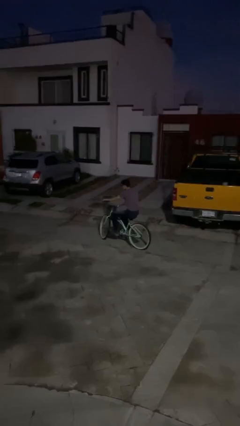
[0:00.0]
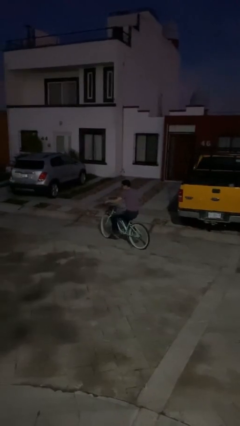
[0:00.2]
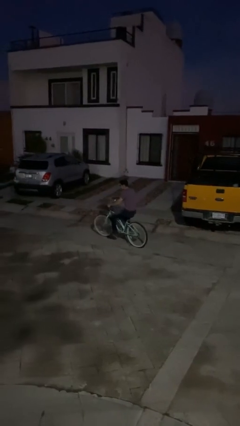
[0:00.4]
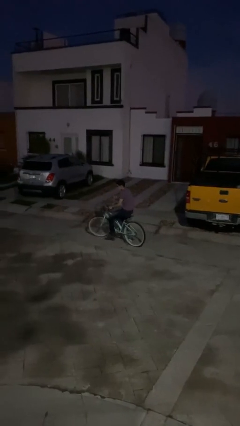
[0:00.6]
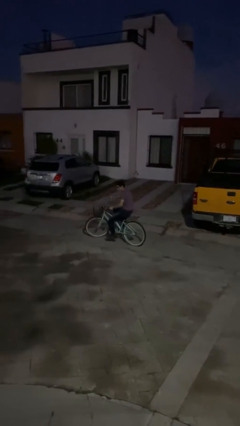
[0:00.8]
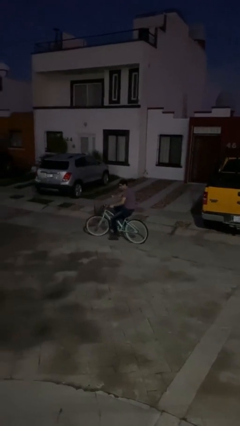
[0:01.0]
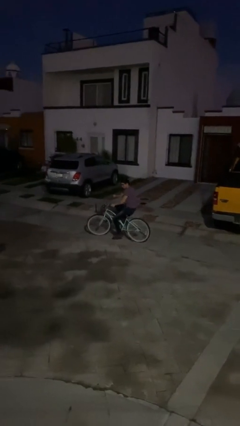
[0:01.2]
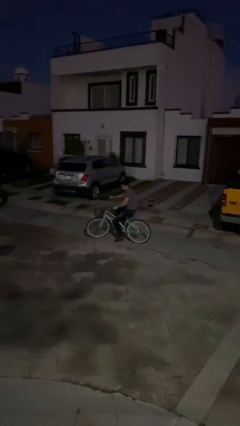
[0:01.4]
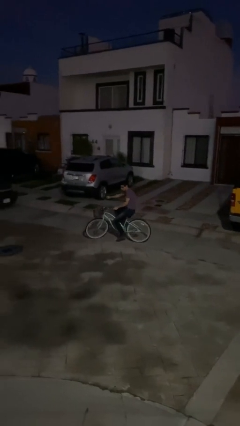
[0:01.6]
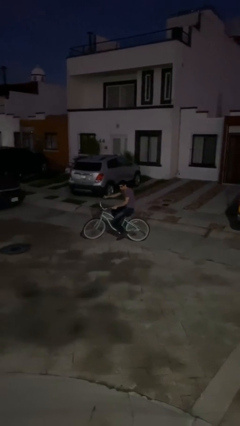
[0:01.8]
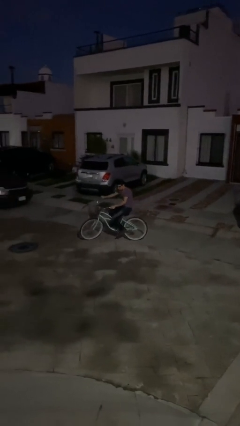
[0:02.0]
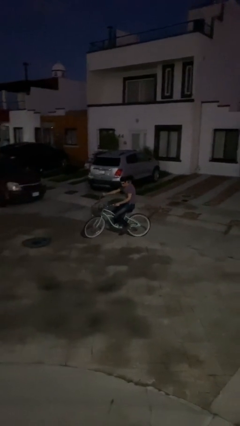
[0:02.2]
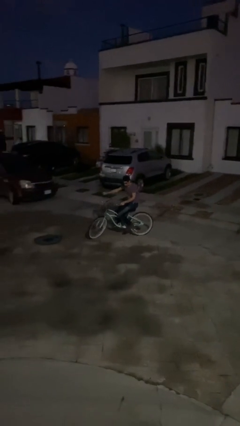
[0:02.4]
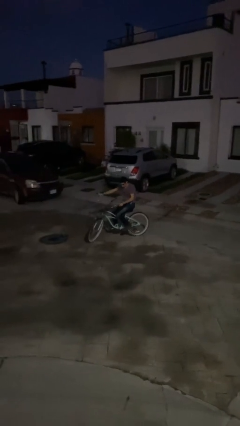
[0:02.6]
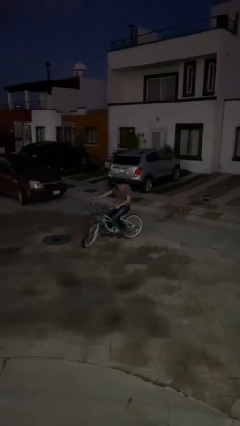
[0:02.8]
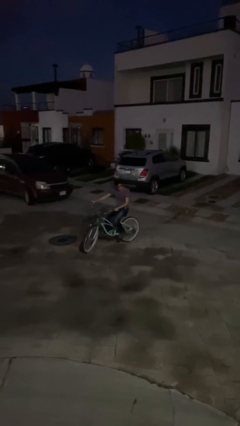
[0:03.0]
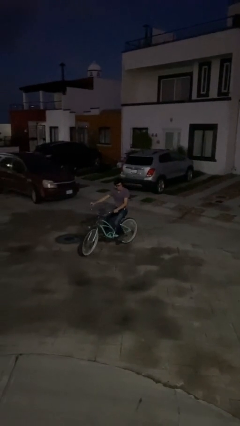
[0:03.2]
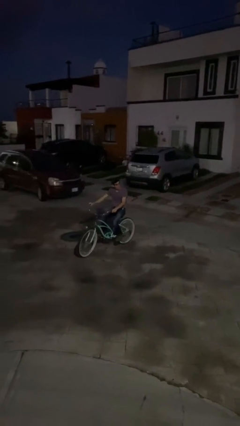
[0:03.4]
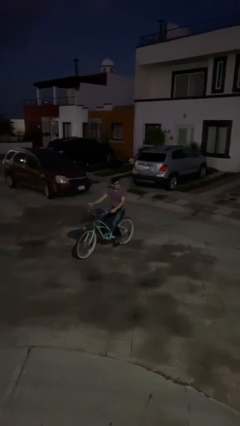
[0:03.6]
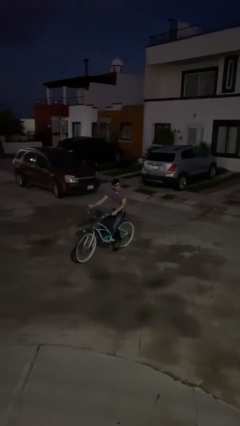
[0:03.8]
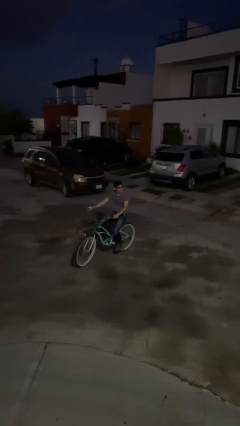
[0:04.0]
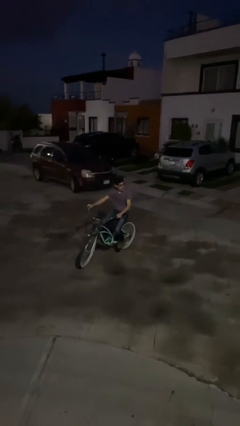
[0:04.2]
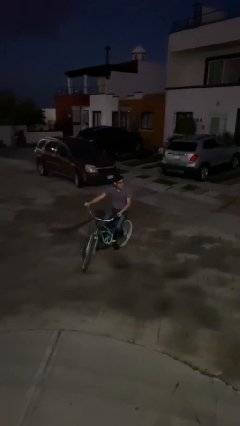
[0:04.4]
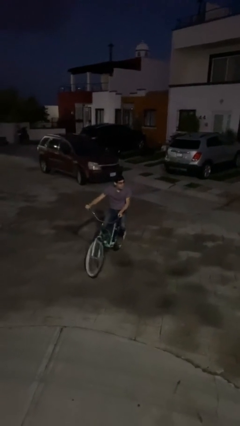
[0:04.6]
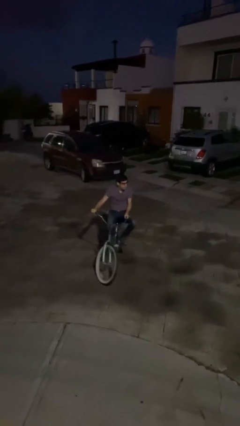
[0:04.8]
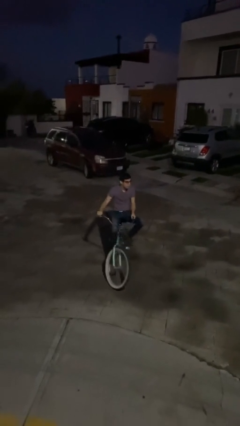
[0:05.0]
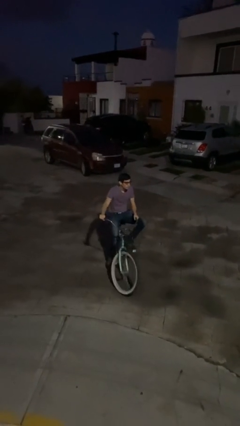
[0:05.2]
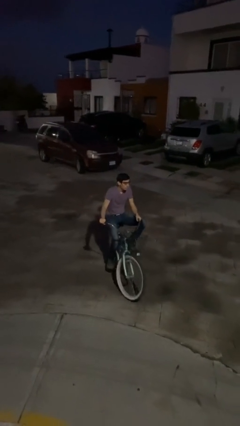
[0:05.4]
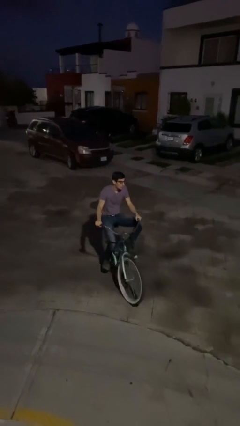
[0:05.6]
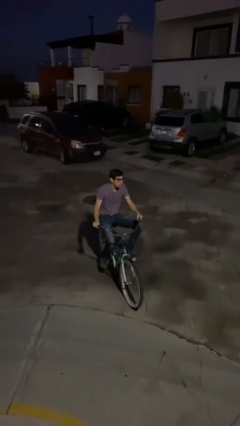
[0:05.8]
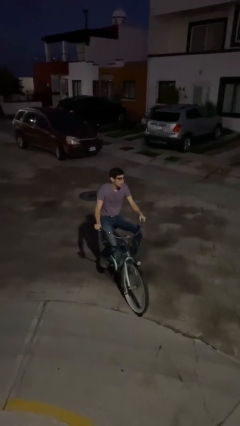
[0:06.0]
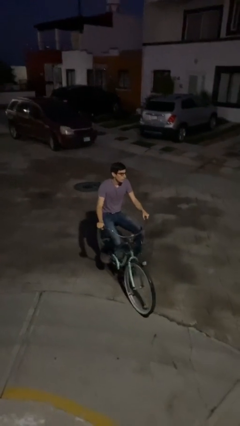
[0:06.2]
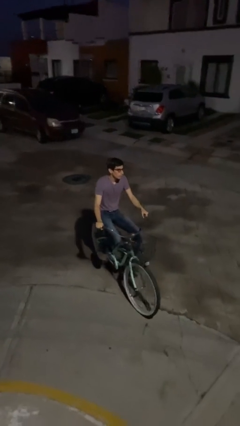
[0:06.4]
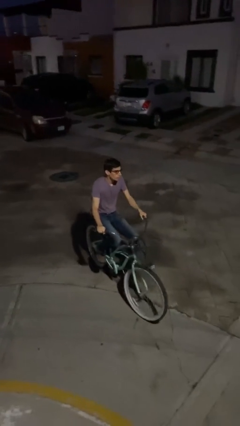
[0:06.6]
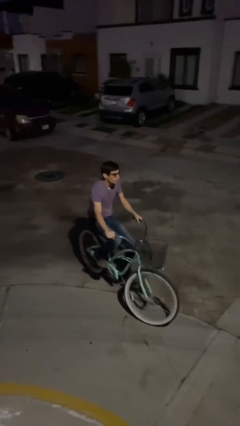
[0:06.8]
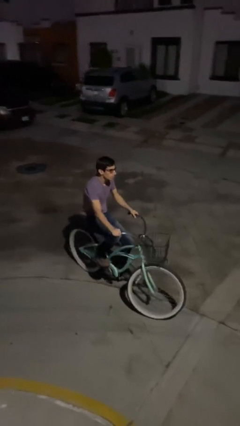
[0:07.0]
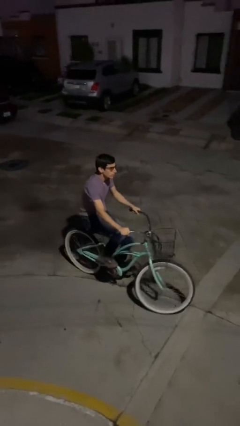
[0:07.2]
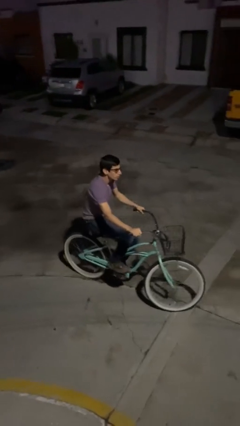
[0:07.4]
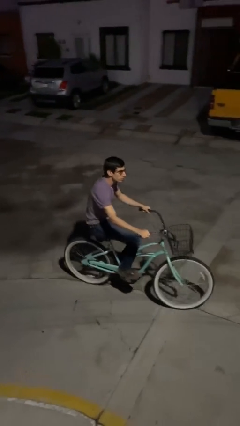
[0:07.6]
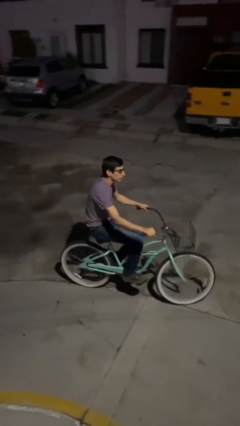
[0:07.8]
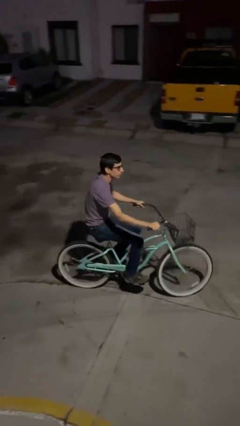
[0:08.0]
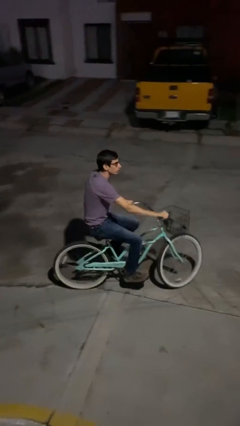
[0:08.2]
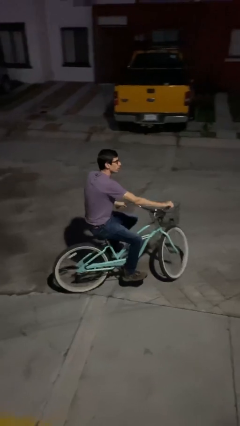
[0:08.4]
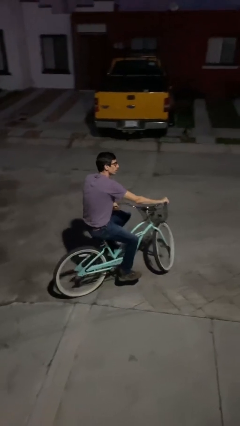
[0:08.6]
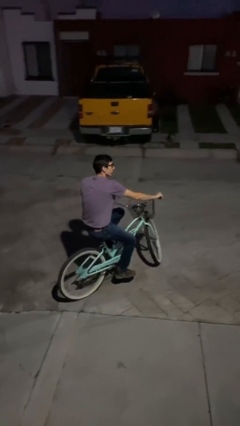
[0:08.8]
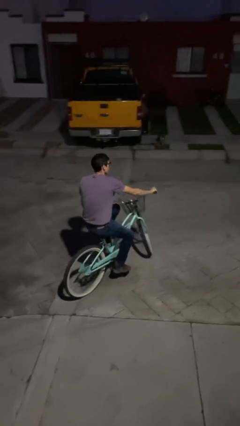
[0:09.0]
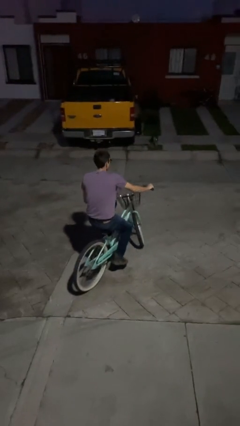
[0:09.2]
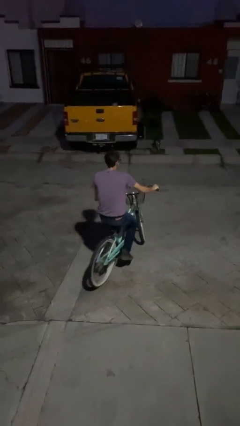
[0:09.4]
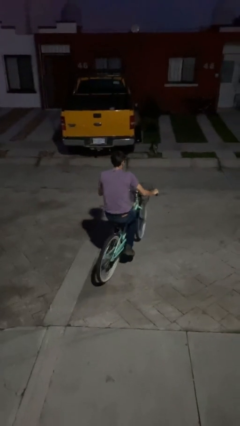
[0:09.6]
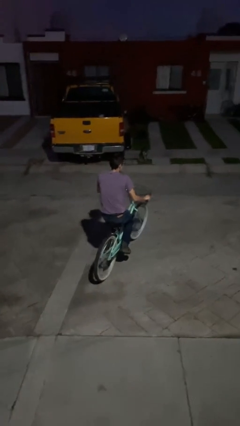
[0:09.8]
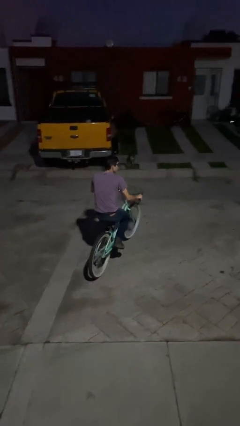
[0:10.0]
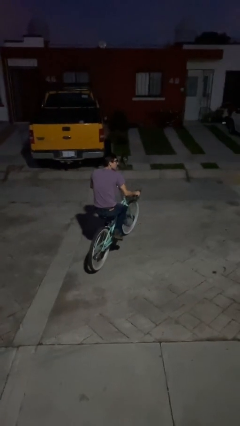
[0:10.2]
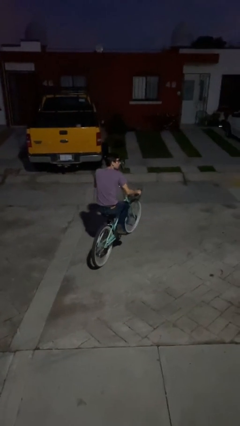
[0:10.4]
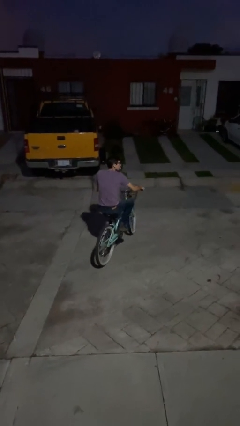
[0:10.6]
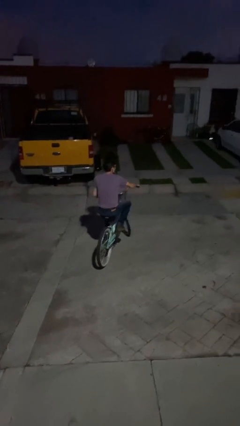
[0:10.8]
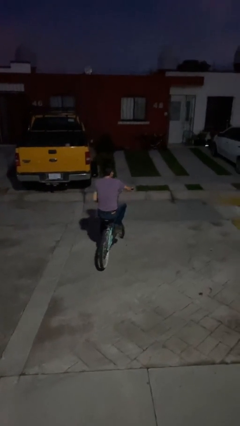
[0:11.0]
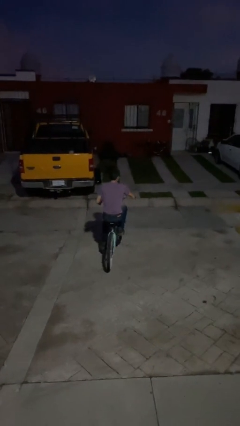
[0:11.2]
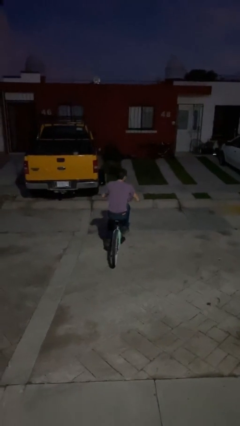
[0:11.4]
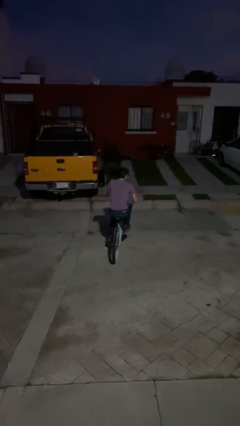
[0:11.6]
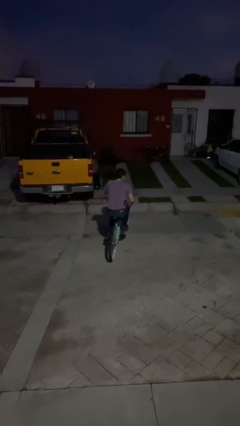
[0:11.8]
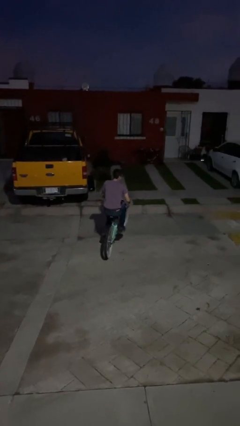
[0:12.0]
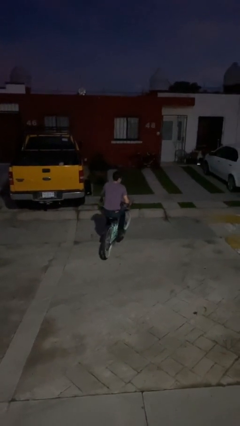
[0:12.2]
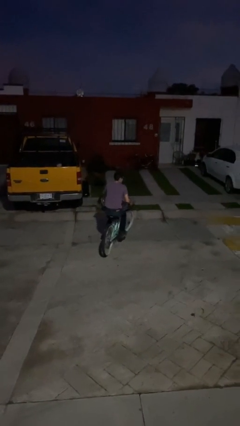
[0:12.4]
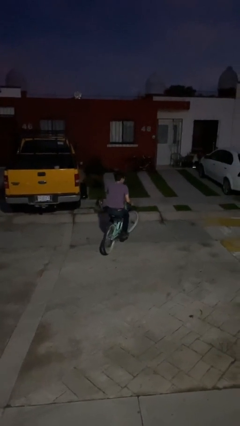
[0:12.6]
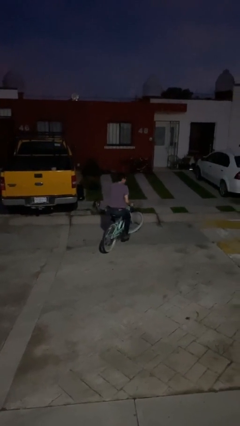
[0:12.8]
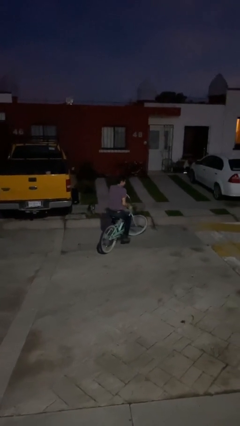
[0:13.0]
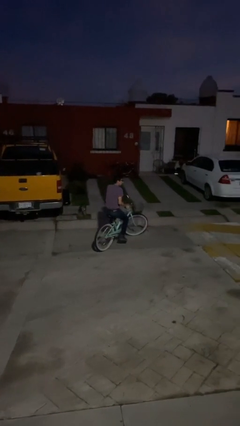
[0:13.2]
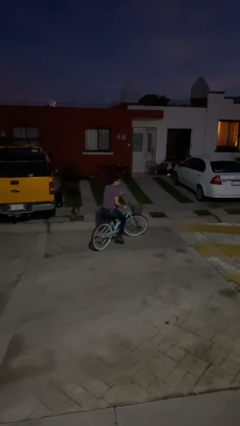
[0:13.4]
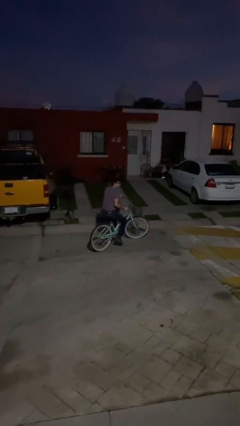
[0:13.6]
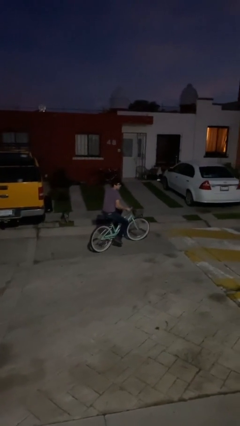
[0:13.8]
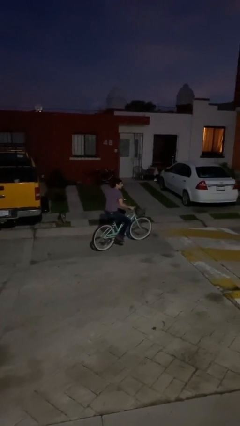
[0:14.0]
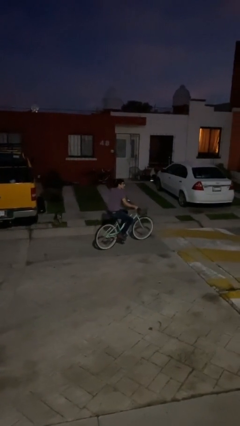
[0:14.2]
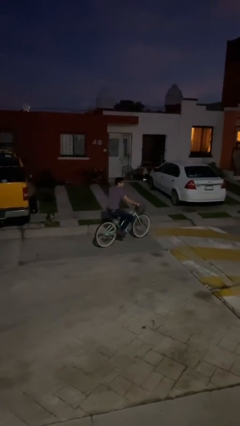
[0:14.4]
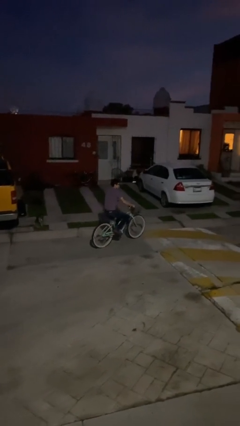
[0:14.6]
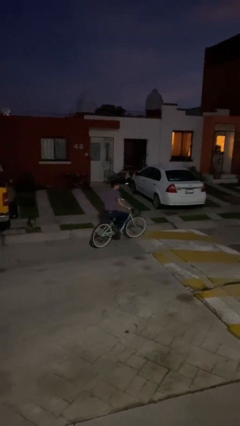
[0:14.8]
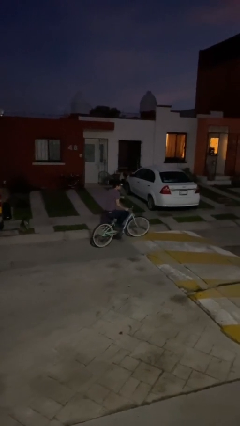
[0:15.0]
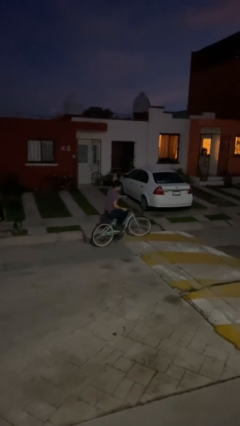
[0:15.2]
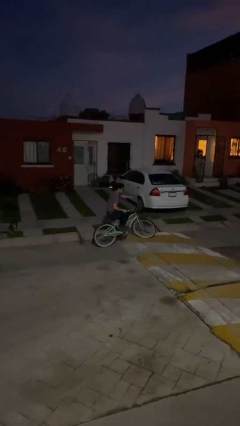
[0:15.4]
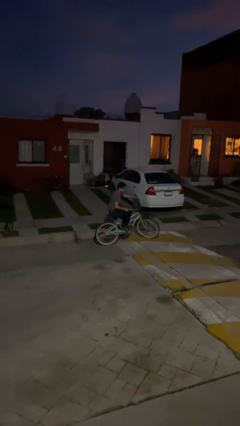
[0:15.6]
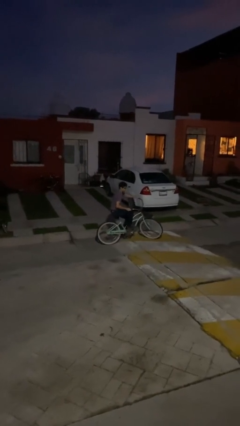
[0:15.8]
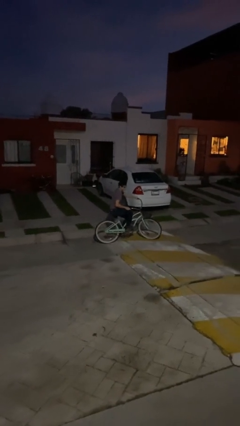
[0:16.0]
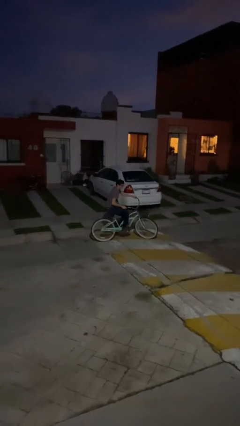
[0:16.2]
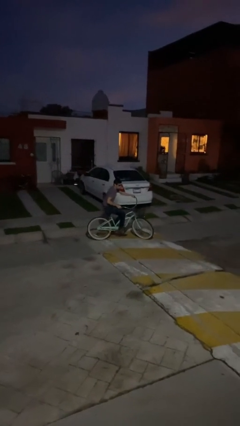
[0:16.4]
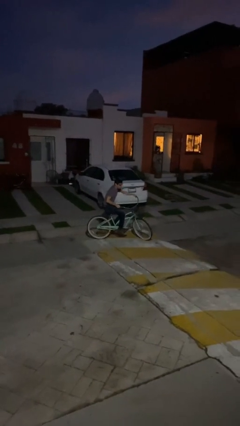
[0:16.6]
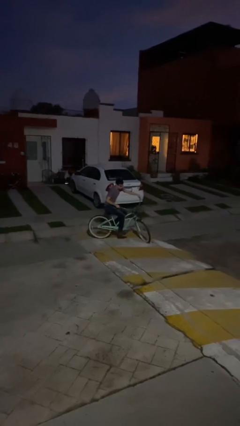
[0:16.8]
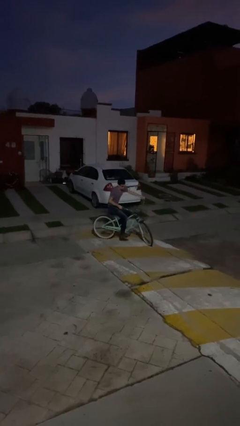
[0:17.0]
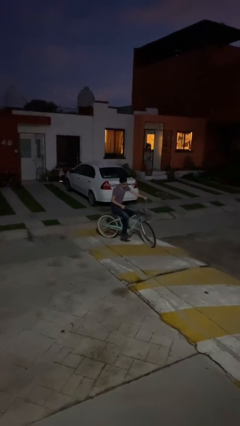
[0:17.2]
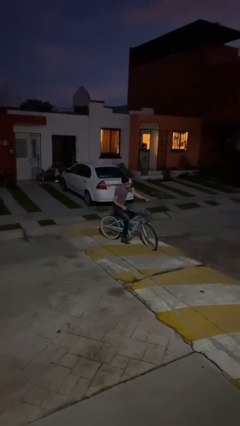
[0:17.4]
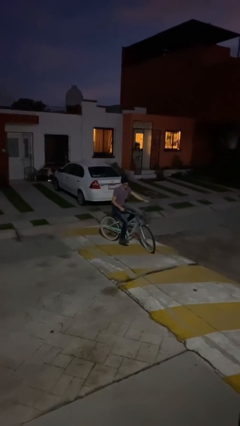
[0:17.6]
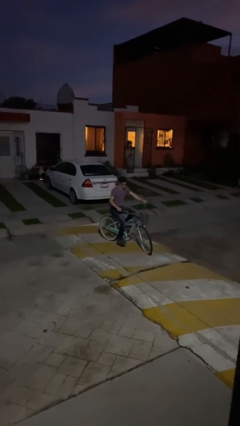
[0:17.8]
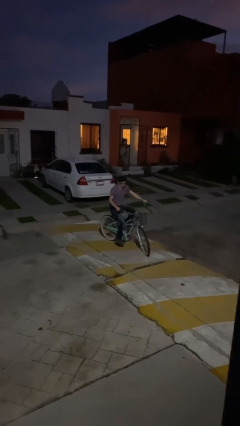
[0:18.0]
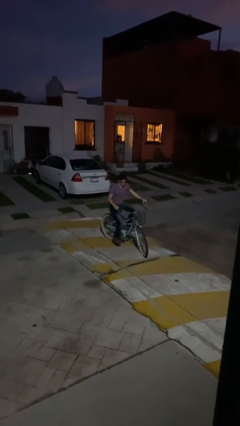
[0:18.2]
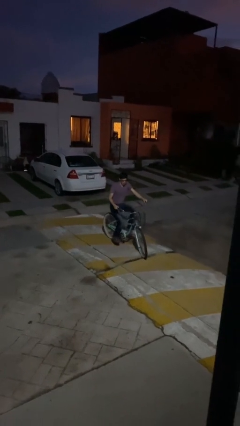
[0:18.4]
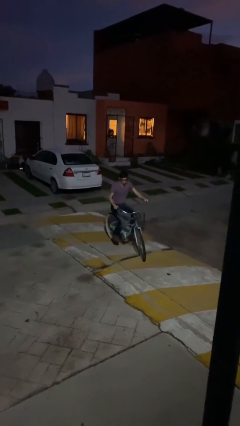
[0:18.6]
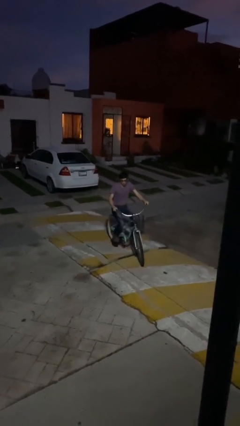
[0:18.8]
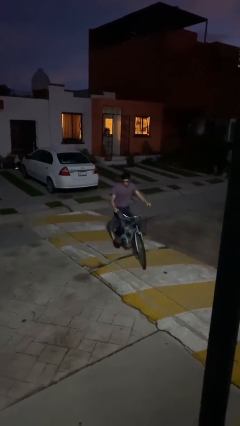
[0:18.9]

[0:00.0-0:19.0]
person rides bicycle
